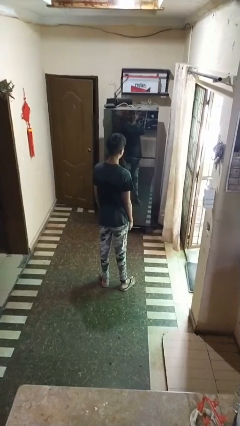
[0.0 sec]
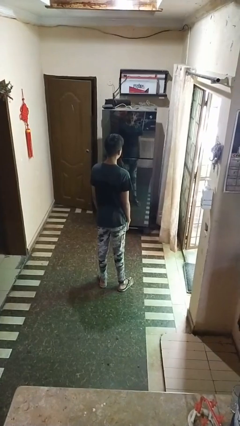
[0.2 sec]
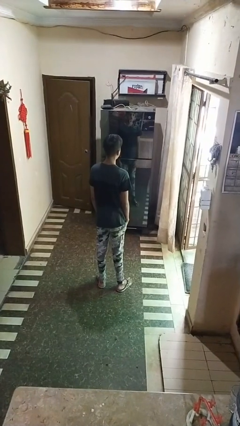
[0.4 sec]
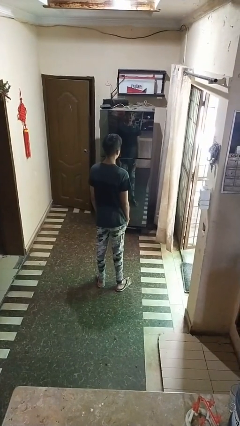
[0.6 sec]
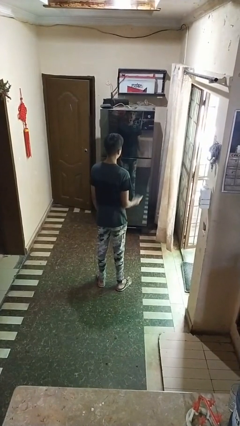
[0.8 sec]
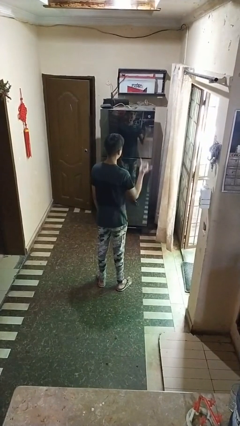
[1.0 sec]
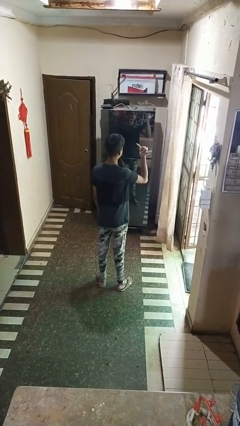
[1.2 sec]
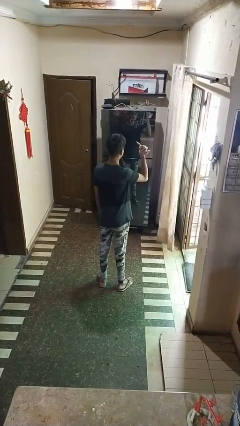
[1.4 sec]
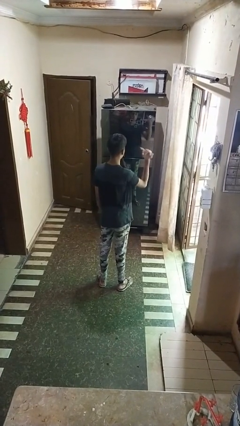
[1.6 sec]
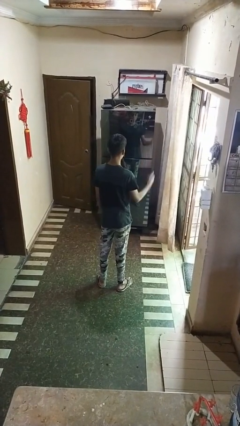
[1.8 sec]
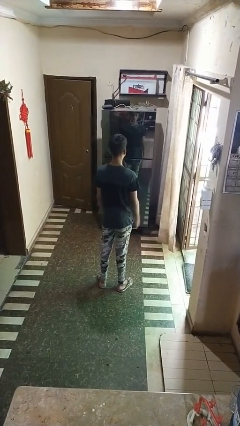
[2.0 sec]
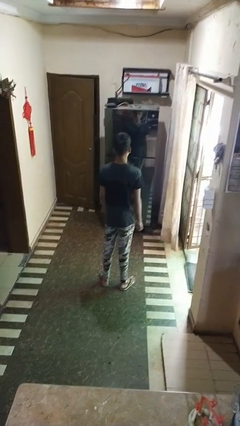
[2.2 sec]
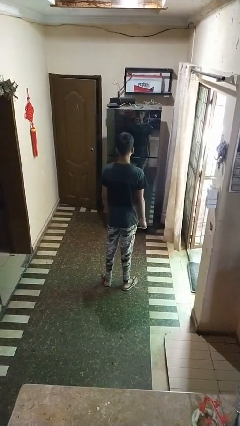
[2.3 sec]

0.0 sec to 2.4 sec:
person gestures hang loose

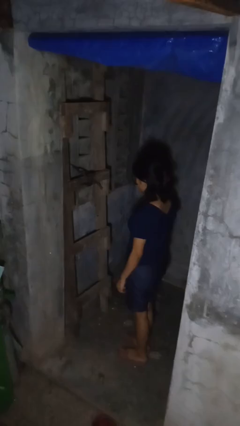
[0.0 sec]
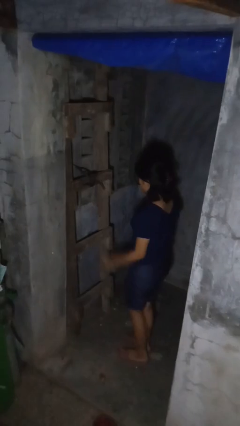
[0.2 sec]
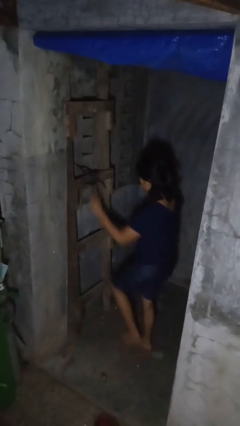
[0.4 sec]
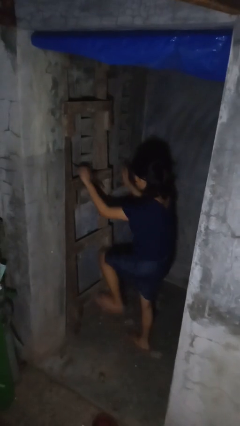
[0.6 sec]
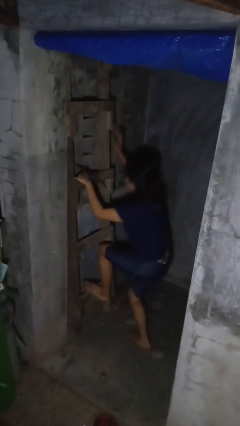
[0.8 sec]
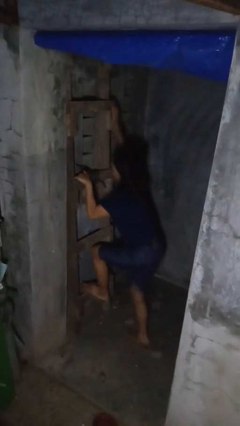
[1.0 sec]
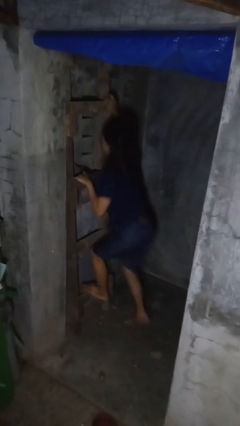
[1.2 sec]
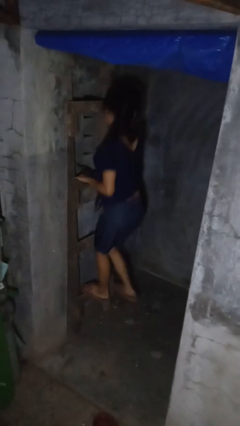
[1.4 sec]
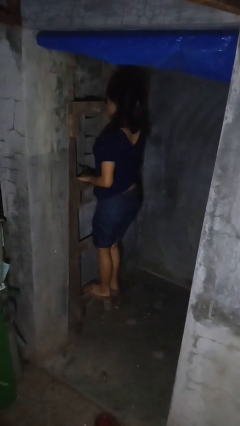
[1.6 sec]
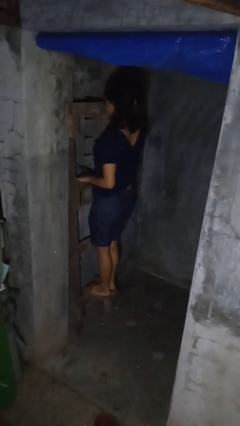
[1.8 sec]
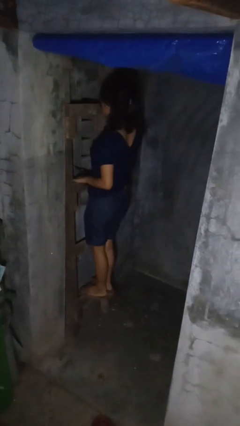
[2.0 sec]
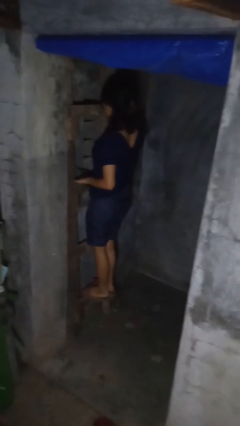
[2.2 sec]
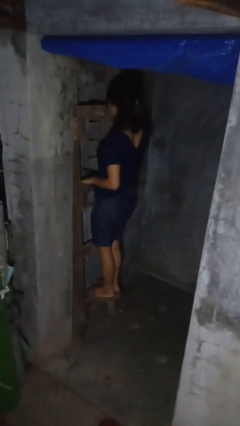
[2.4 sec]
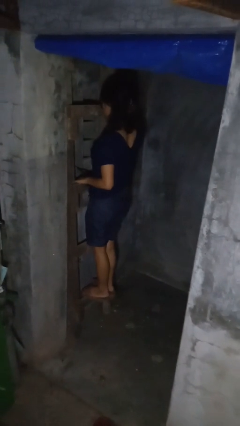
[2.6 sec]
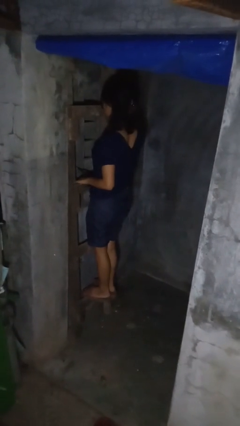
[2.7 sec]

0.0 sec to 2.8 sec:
person climbs up ladder

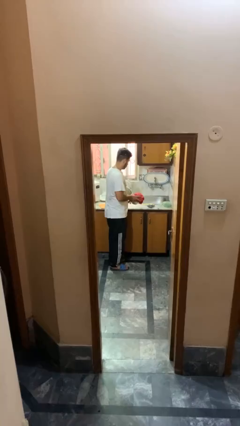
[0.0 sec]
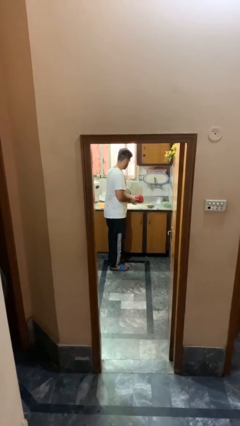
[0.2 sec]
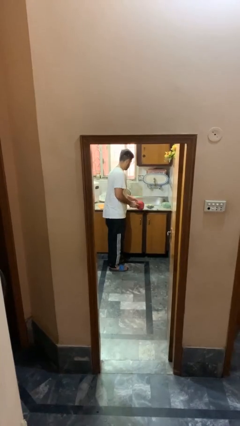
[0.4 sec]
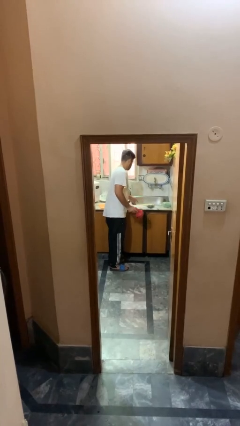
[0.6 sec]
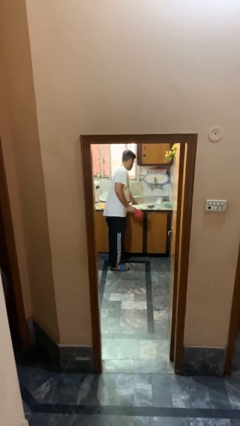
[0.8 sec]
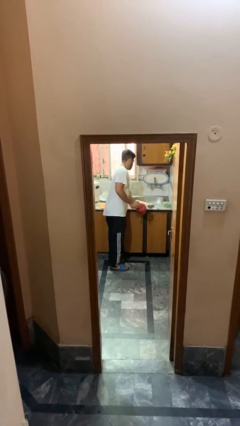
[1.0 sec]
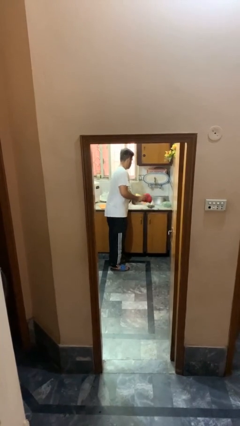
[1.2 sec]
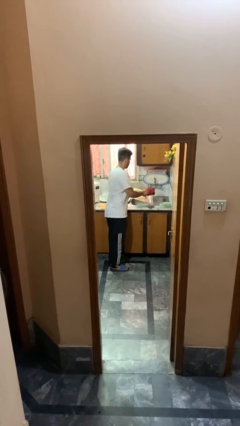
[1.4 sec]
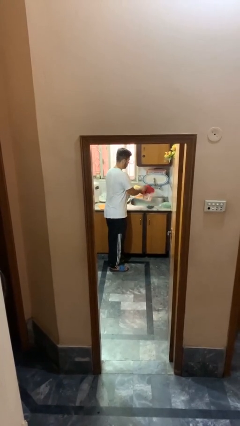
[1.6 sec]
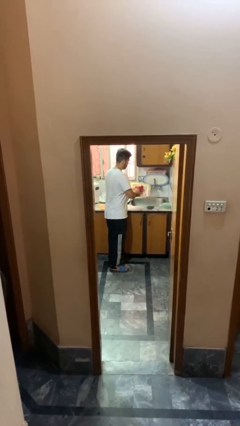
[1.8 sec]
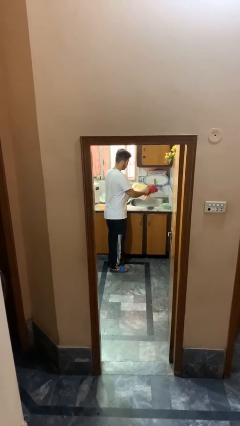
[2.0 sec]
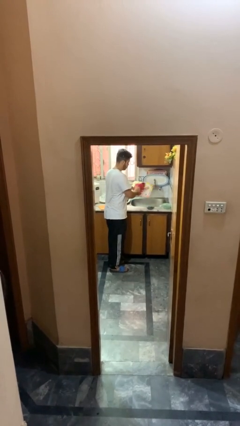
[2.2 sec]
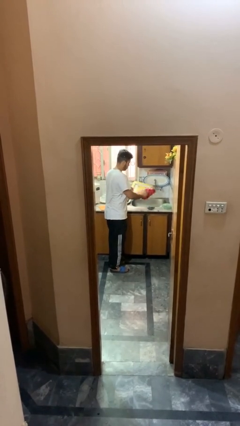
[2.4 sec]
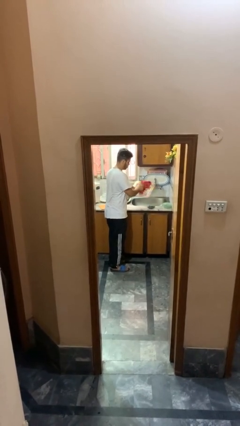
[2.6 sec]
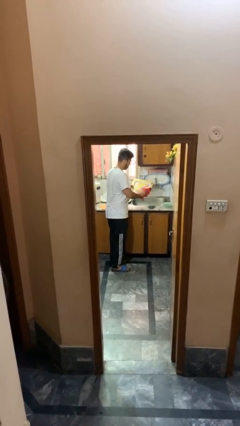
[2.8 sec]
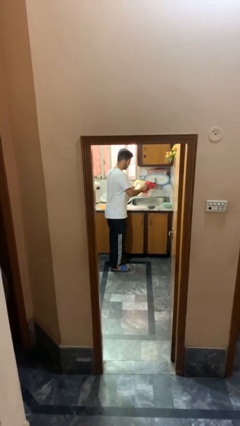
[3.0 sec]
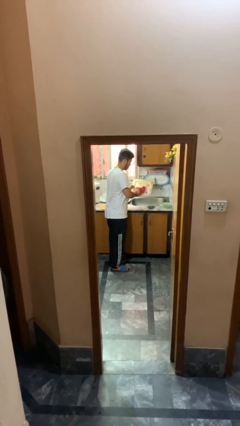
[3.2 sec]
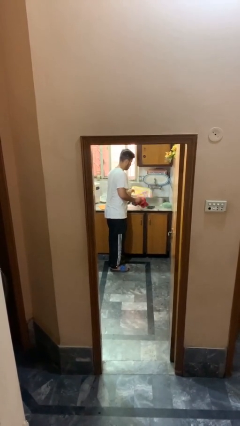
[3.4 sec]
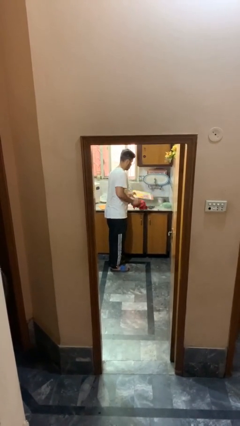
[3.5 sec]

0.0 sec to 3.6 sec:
person dries dish

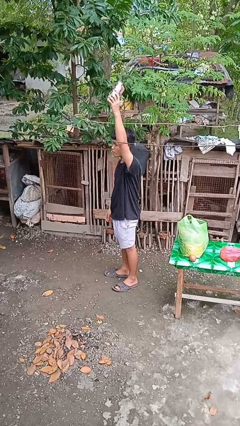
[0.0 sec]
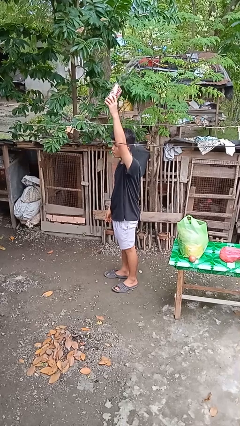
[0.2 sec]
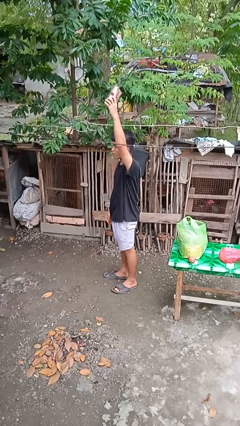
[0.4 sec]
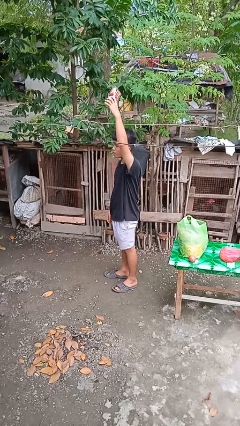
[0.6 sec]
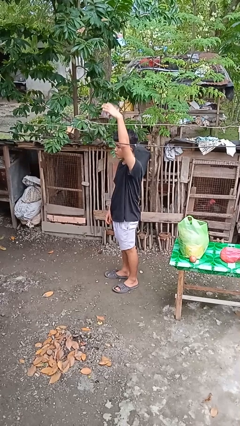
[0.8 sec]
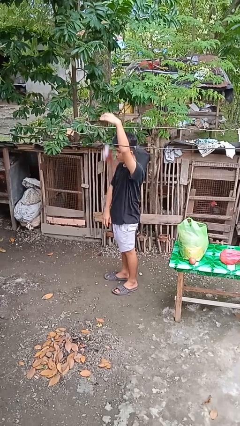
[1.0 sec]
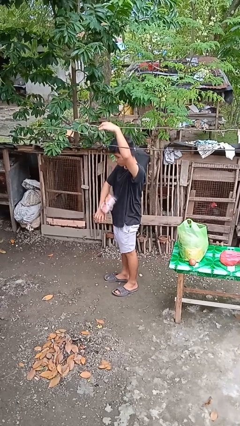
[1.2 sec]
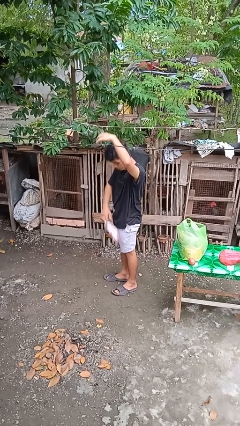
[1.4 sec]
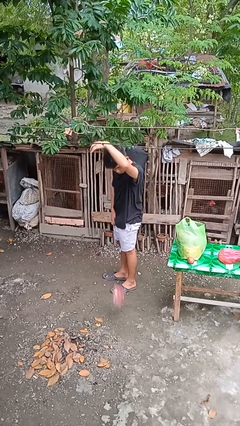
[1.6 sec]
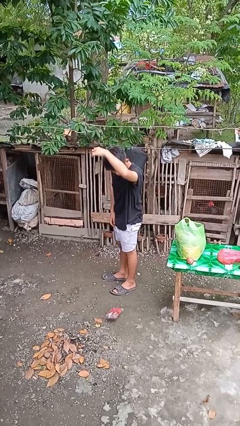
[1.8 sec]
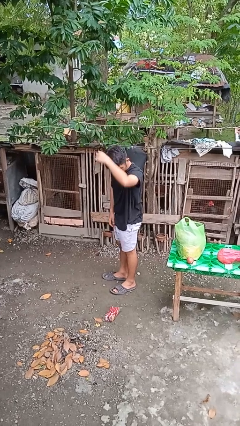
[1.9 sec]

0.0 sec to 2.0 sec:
person drops object

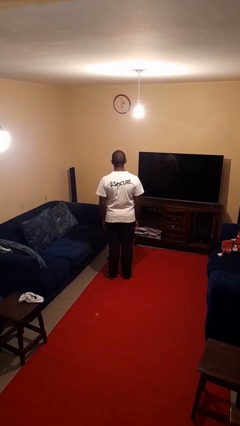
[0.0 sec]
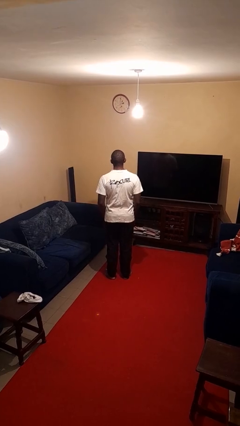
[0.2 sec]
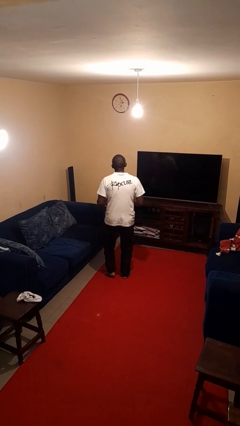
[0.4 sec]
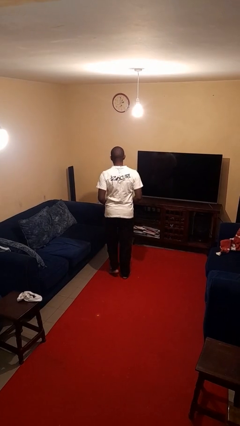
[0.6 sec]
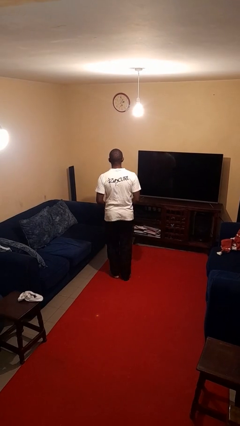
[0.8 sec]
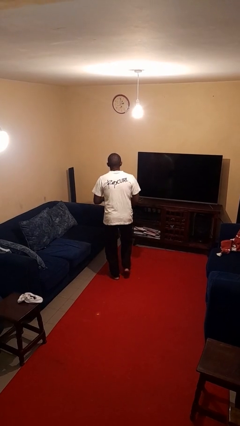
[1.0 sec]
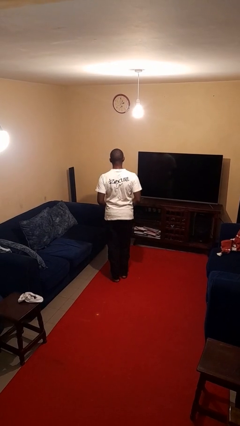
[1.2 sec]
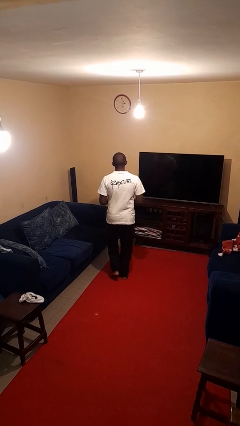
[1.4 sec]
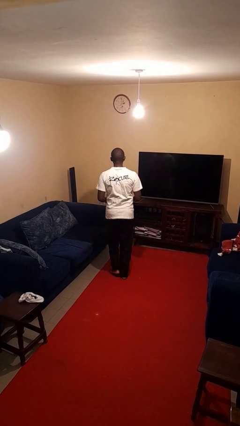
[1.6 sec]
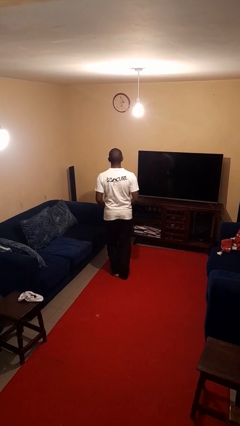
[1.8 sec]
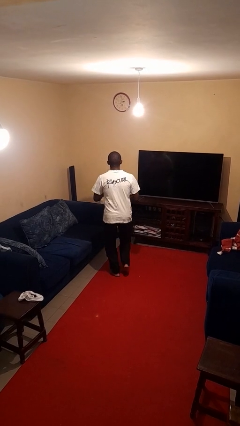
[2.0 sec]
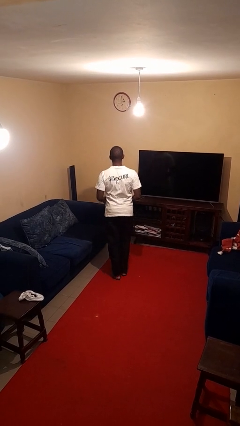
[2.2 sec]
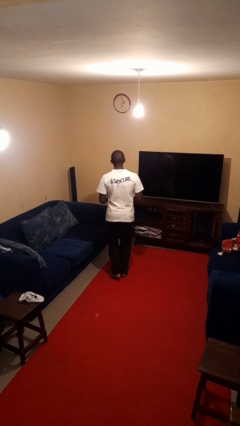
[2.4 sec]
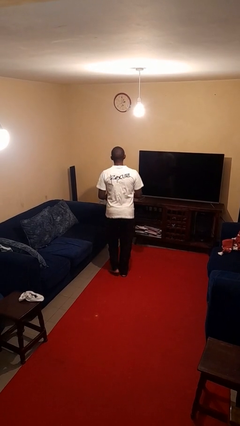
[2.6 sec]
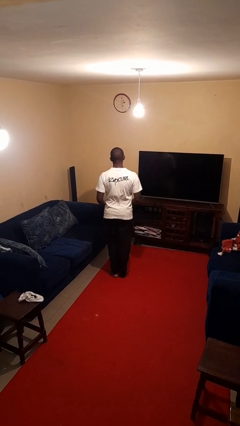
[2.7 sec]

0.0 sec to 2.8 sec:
person dances in place

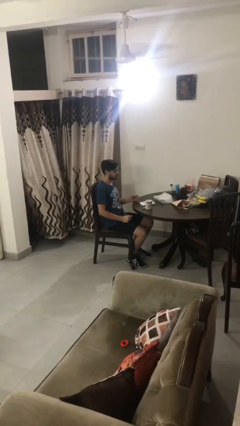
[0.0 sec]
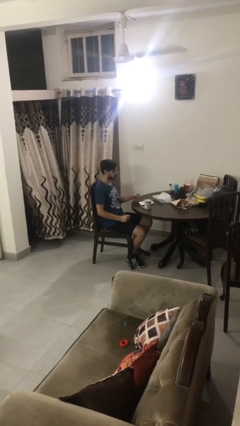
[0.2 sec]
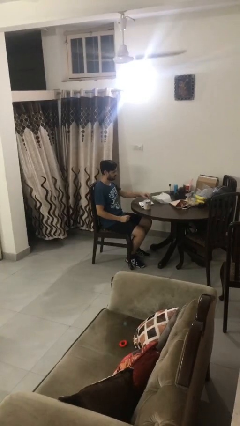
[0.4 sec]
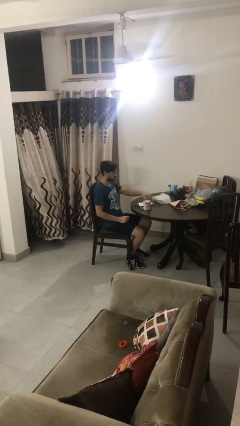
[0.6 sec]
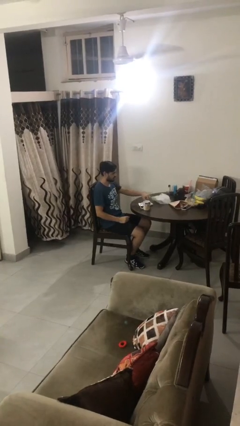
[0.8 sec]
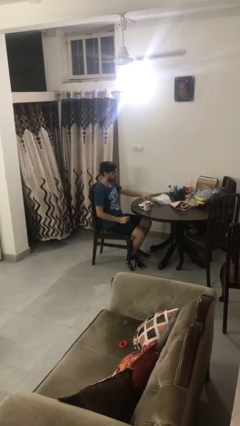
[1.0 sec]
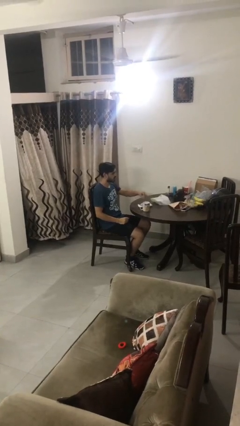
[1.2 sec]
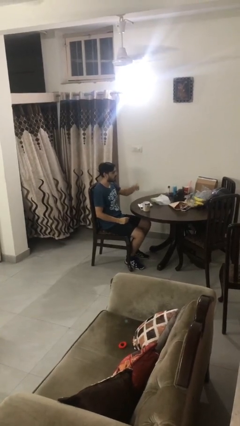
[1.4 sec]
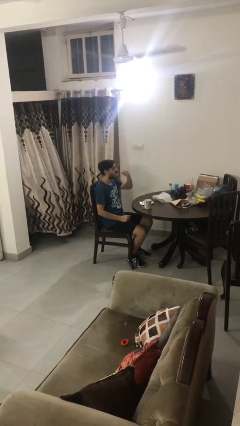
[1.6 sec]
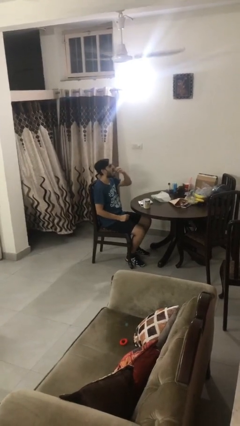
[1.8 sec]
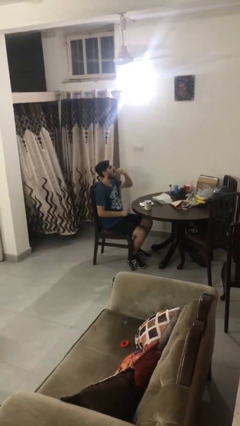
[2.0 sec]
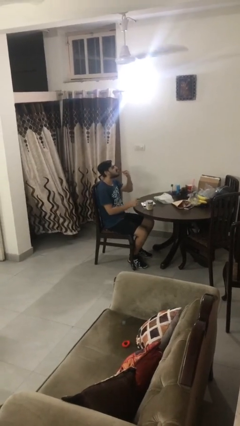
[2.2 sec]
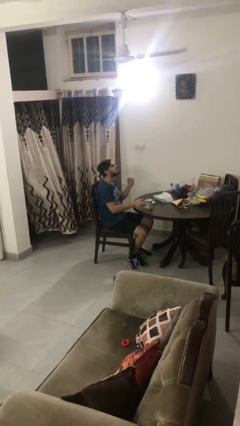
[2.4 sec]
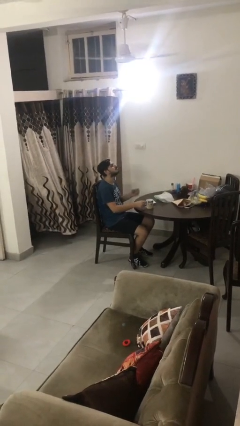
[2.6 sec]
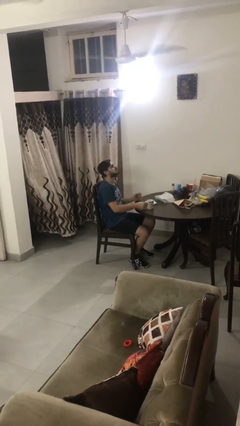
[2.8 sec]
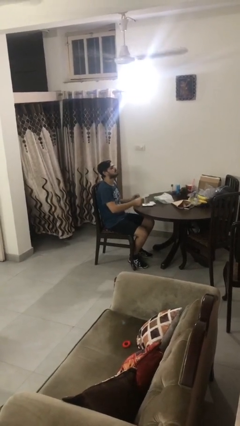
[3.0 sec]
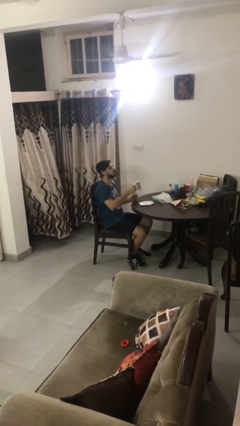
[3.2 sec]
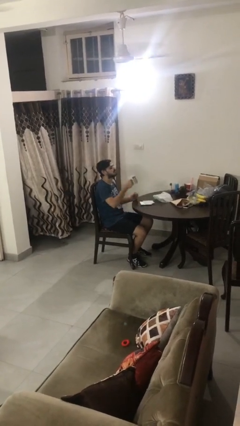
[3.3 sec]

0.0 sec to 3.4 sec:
person takes medicine pills

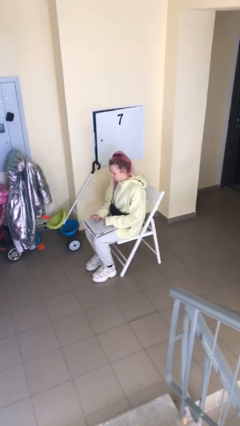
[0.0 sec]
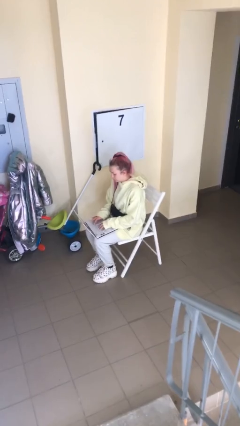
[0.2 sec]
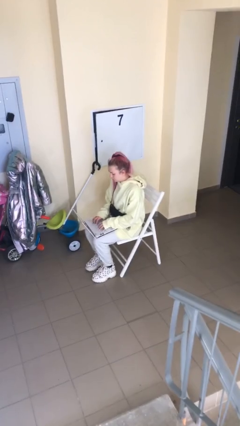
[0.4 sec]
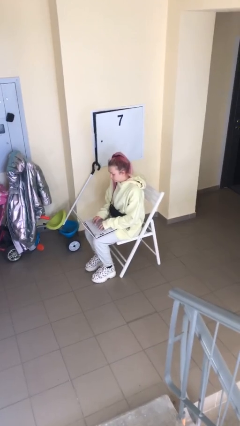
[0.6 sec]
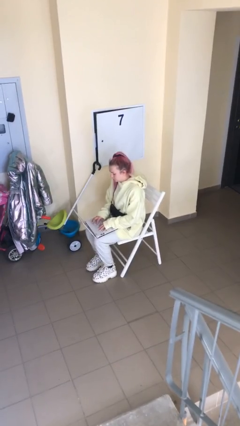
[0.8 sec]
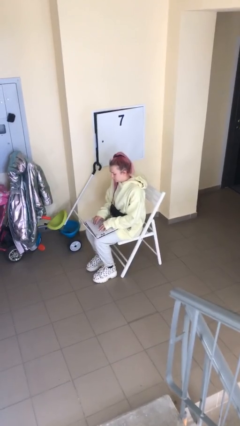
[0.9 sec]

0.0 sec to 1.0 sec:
person interacts with laptop
